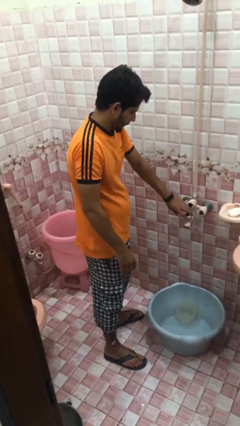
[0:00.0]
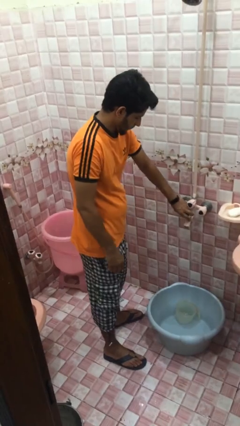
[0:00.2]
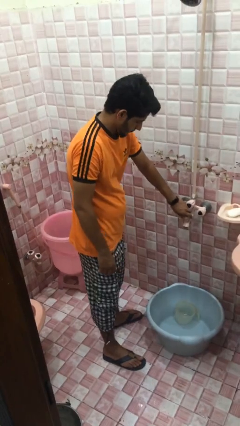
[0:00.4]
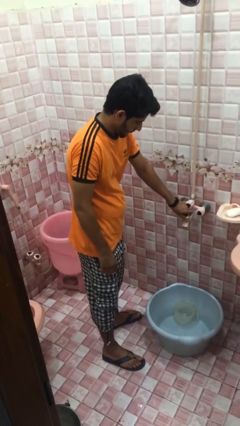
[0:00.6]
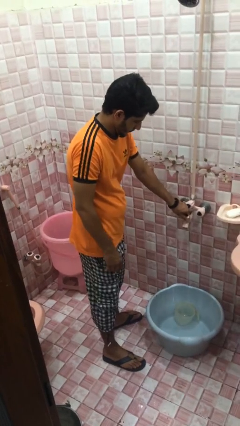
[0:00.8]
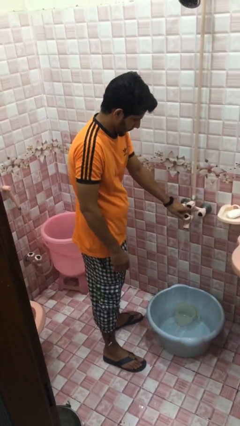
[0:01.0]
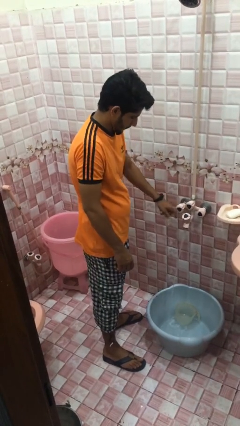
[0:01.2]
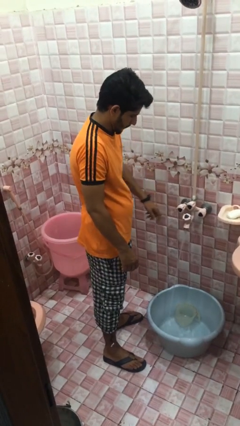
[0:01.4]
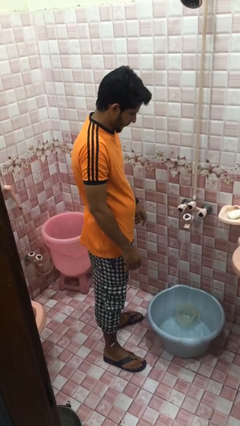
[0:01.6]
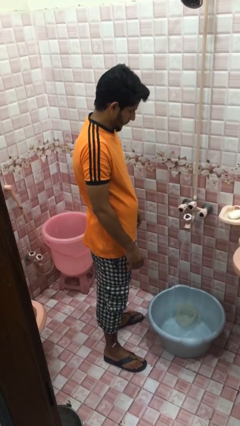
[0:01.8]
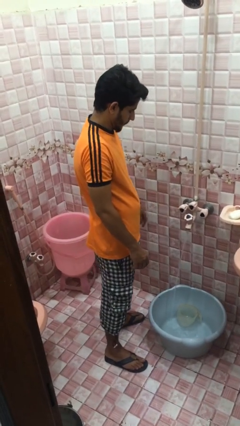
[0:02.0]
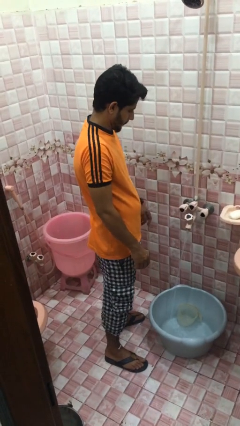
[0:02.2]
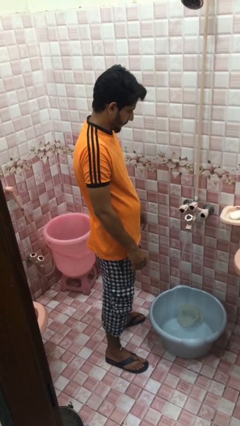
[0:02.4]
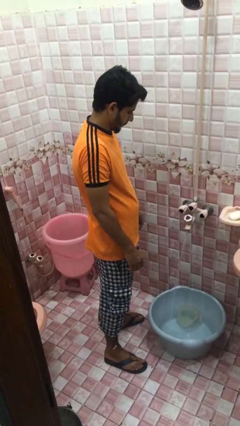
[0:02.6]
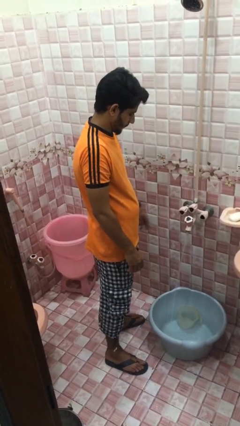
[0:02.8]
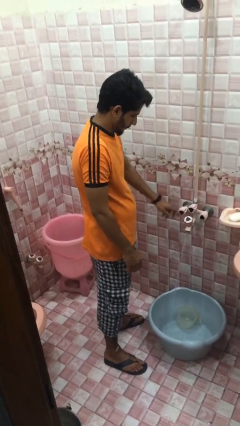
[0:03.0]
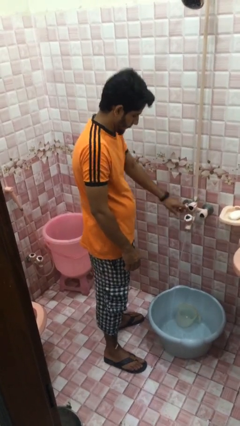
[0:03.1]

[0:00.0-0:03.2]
person turns on faucet

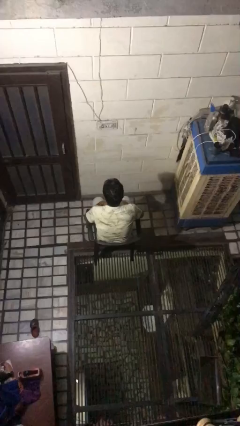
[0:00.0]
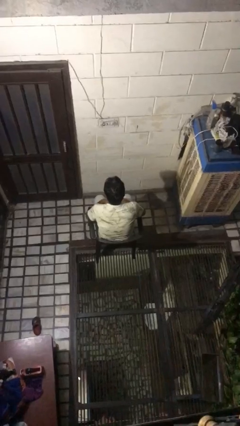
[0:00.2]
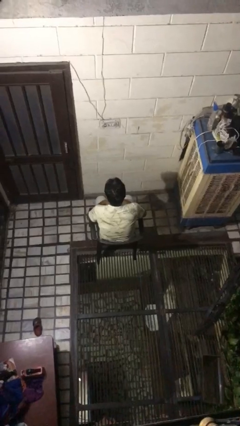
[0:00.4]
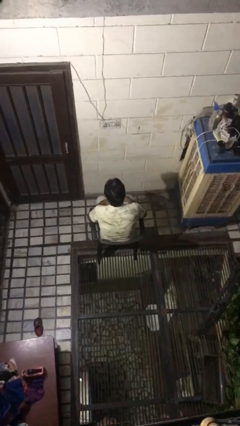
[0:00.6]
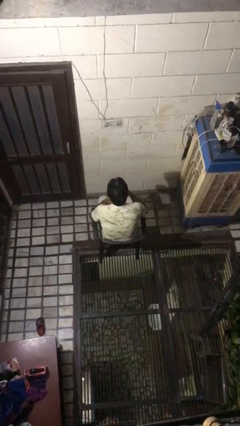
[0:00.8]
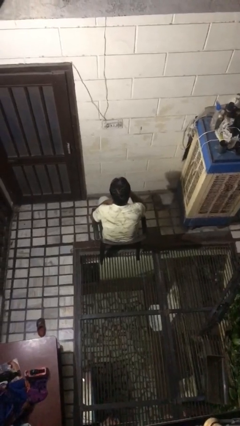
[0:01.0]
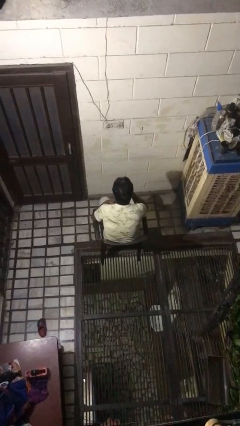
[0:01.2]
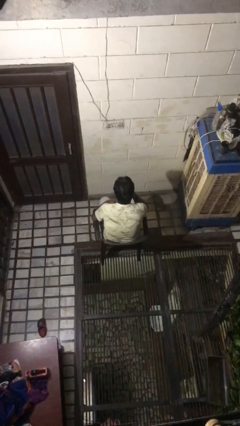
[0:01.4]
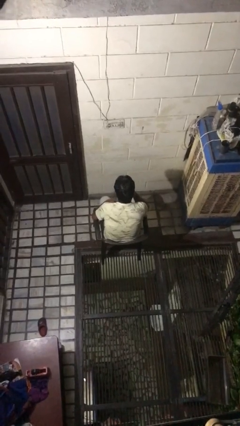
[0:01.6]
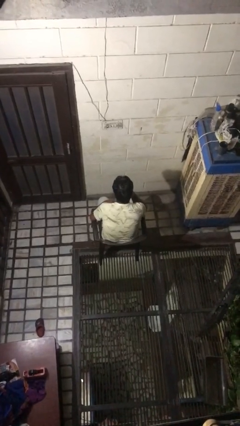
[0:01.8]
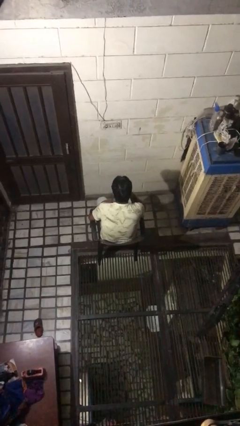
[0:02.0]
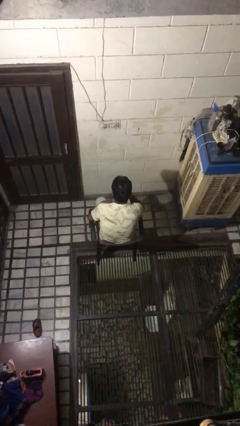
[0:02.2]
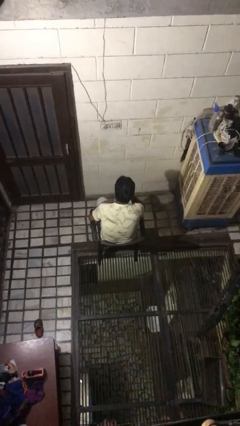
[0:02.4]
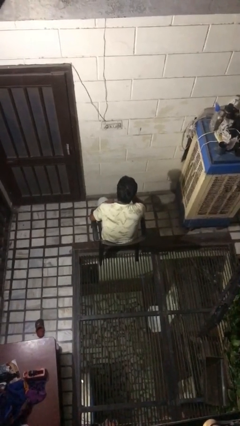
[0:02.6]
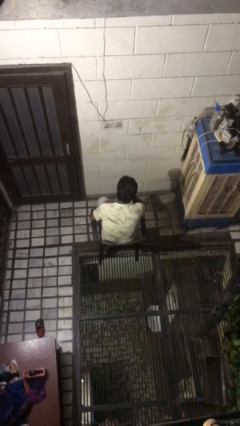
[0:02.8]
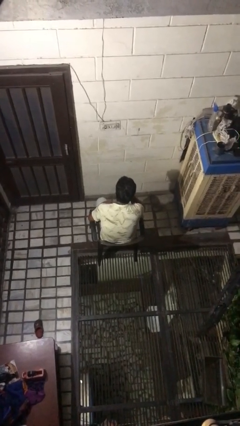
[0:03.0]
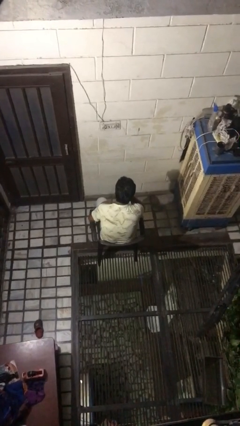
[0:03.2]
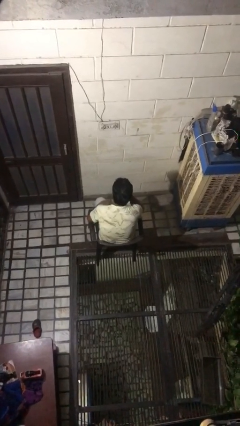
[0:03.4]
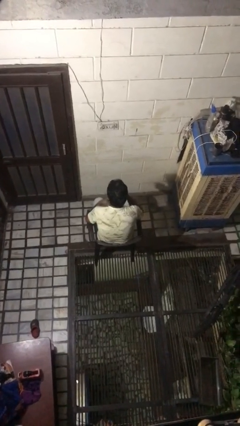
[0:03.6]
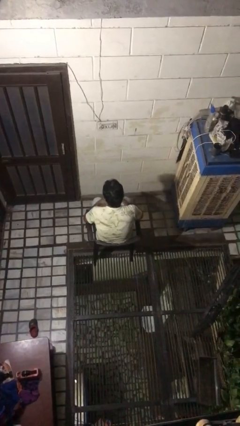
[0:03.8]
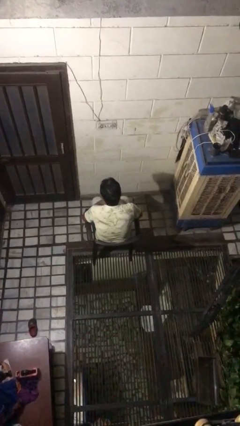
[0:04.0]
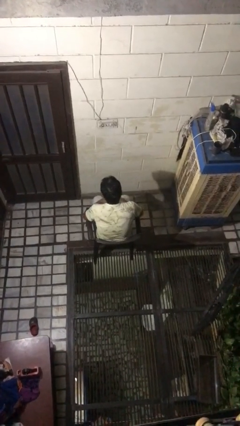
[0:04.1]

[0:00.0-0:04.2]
person strokes chin

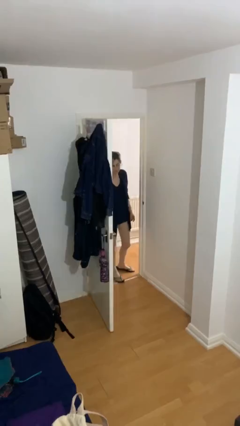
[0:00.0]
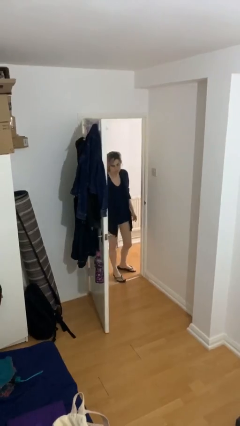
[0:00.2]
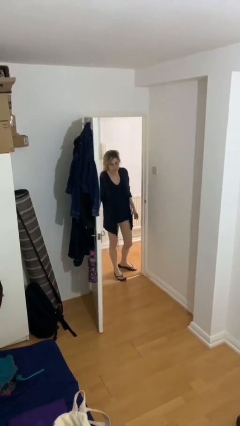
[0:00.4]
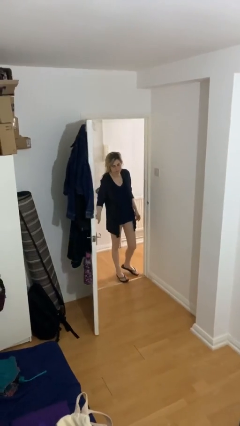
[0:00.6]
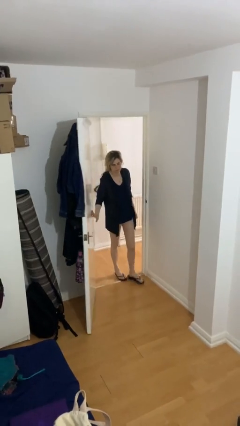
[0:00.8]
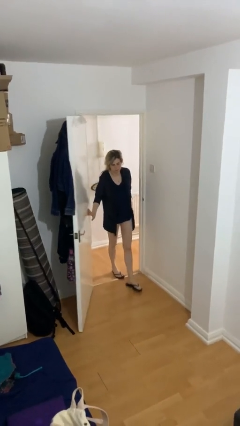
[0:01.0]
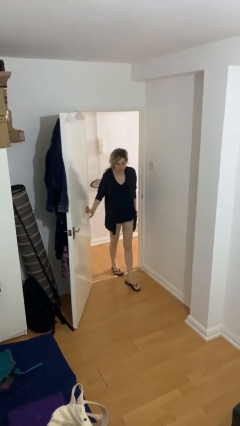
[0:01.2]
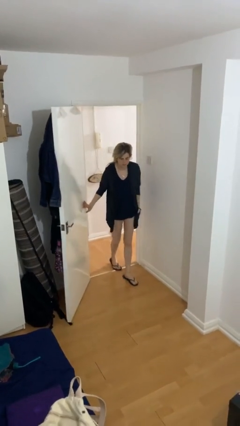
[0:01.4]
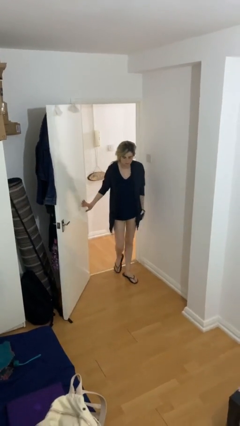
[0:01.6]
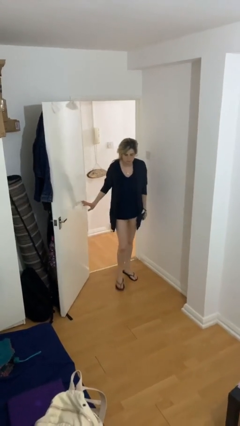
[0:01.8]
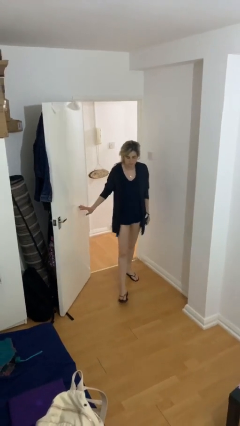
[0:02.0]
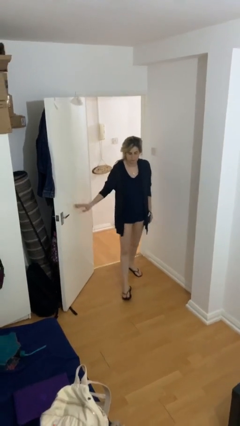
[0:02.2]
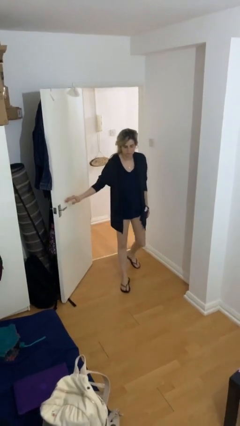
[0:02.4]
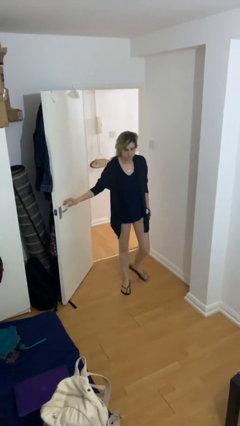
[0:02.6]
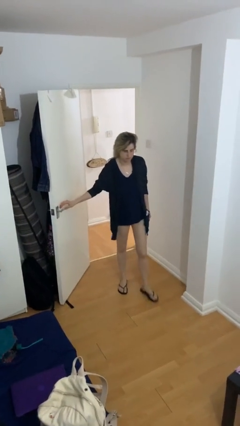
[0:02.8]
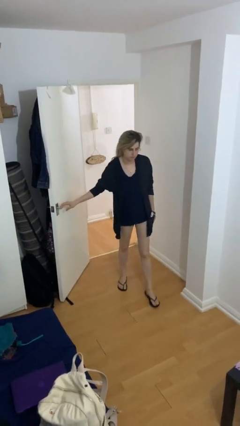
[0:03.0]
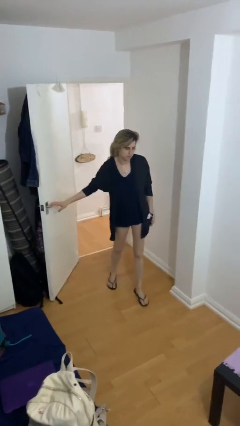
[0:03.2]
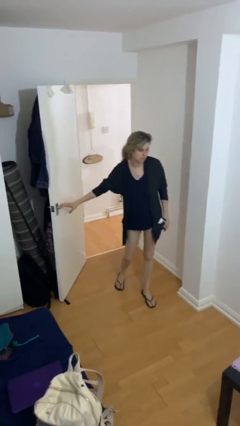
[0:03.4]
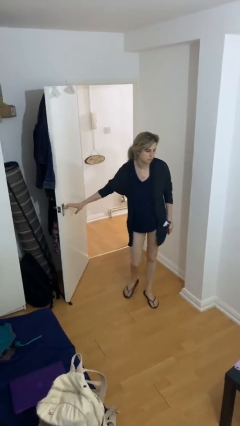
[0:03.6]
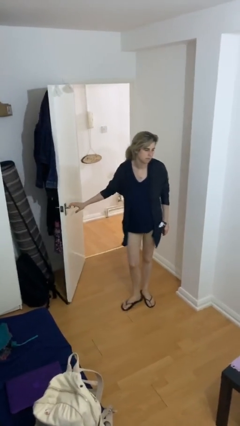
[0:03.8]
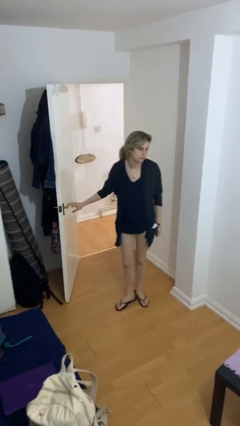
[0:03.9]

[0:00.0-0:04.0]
person enters scene through structure

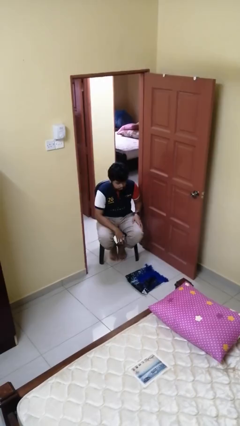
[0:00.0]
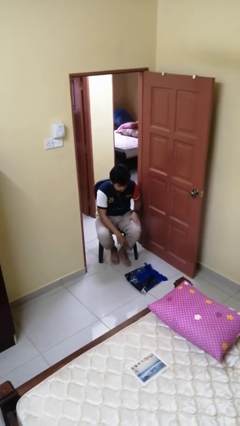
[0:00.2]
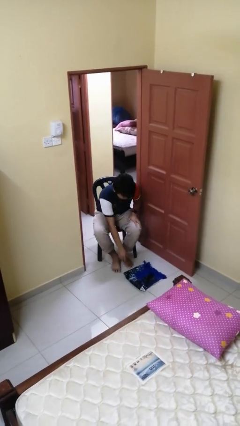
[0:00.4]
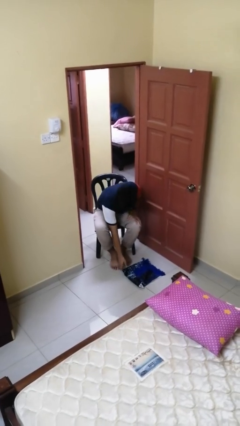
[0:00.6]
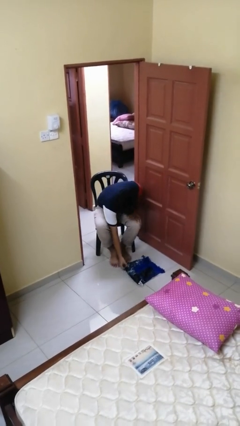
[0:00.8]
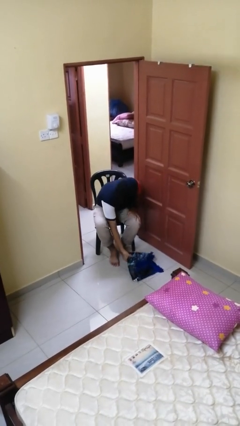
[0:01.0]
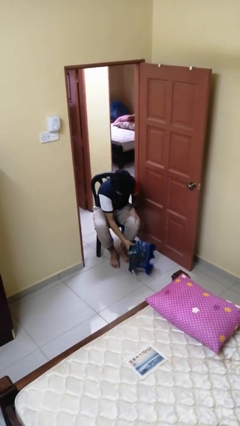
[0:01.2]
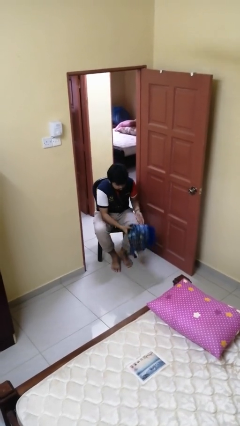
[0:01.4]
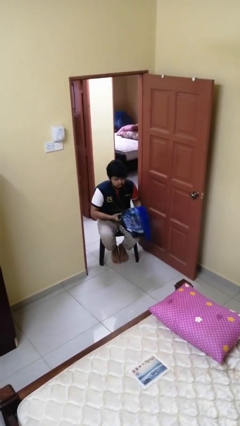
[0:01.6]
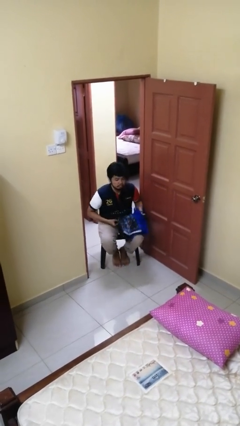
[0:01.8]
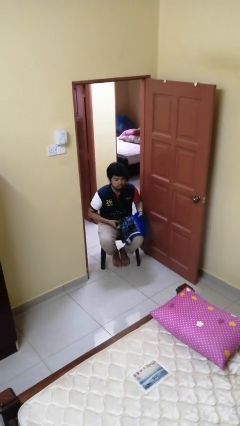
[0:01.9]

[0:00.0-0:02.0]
person picks up object from floor

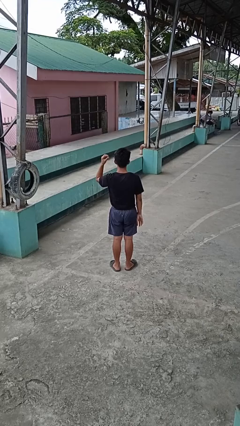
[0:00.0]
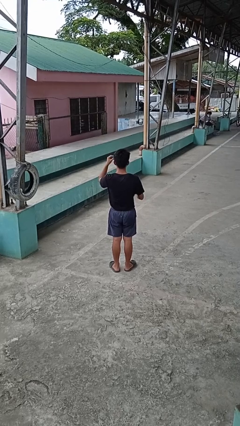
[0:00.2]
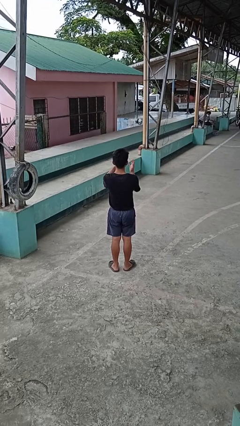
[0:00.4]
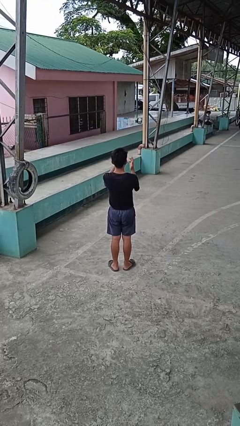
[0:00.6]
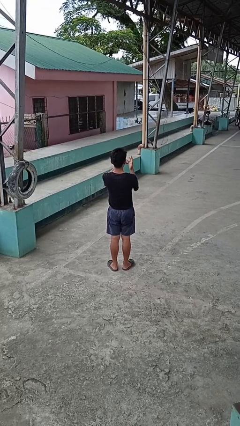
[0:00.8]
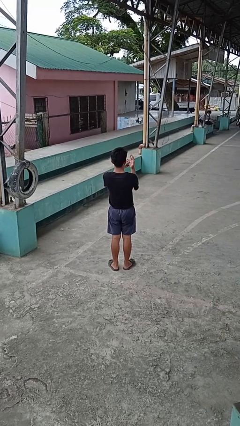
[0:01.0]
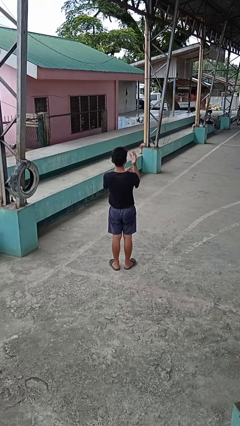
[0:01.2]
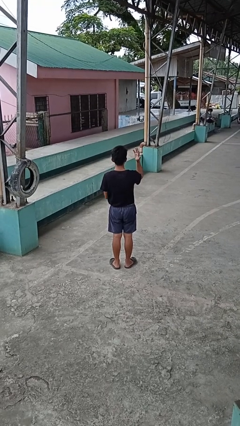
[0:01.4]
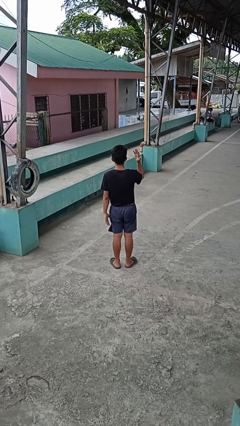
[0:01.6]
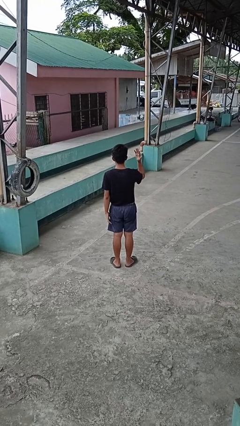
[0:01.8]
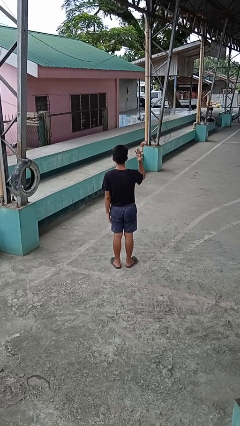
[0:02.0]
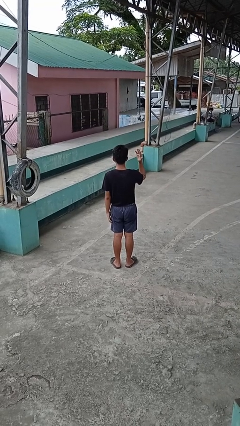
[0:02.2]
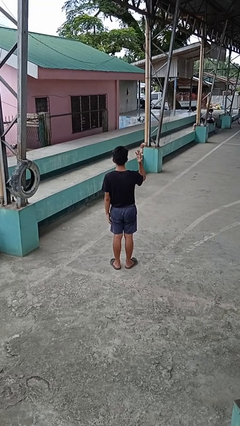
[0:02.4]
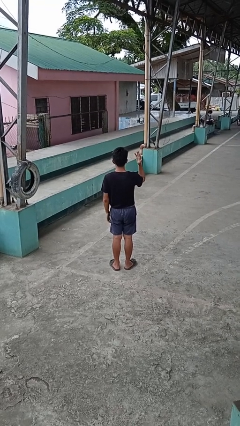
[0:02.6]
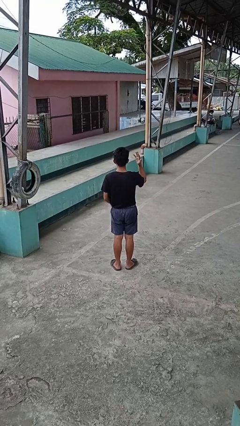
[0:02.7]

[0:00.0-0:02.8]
person puts on ring

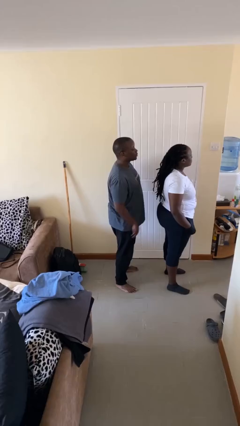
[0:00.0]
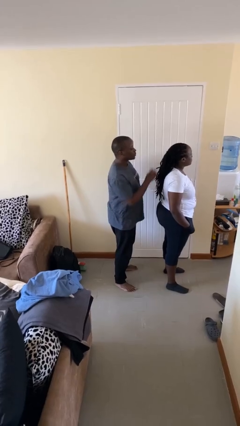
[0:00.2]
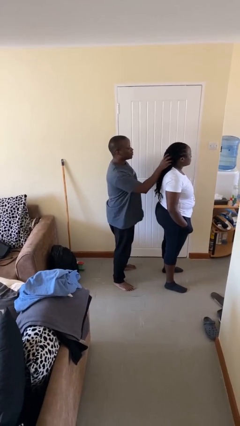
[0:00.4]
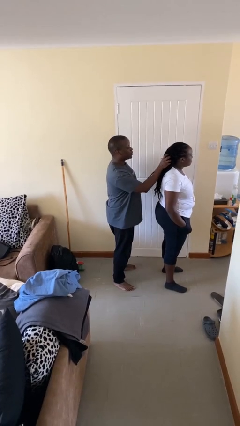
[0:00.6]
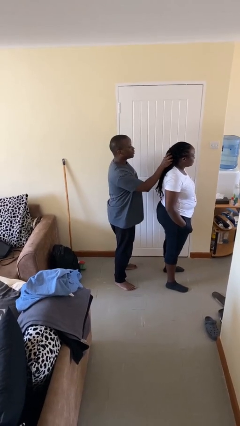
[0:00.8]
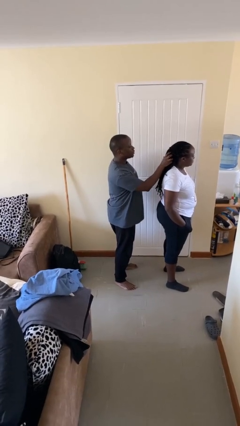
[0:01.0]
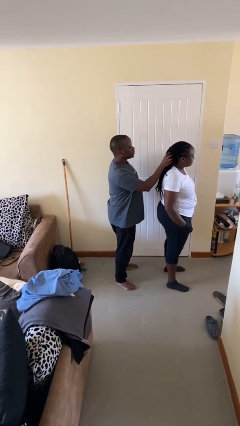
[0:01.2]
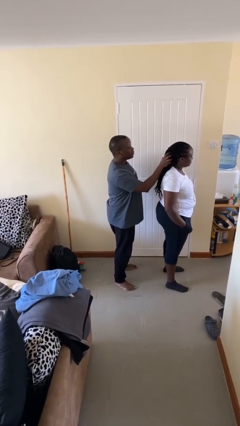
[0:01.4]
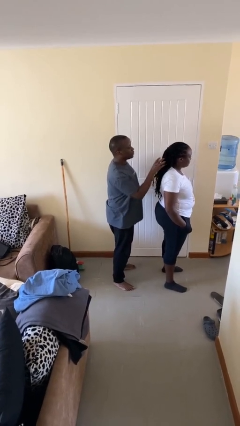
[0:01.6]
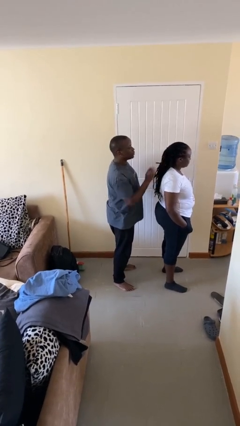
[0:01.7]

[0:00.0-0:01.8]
person grabs person by hair
